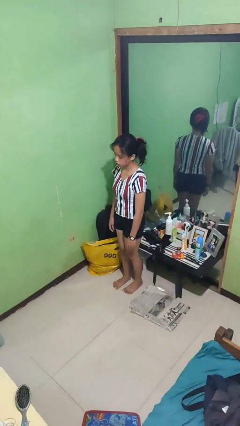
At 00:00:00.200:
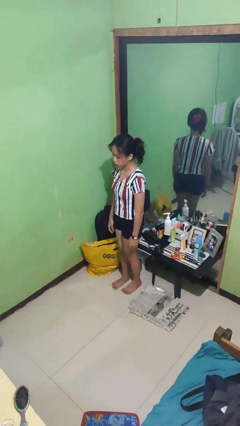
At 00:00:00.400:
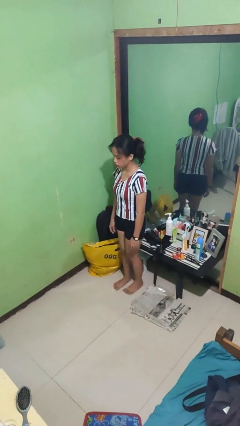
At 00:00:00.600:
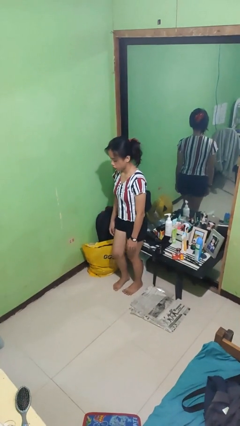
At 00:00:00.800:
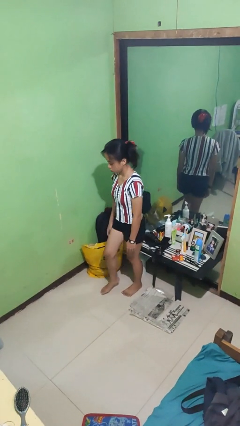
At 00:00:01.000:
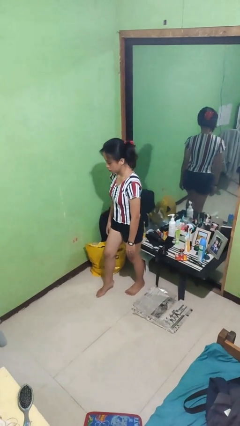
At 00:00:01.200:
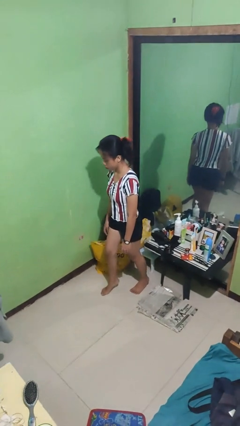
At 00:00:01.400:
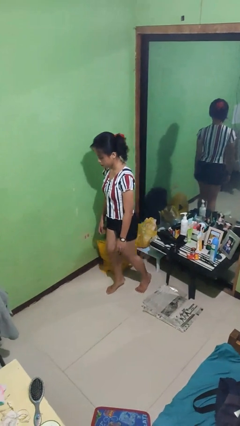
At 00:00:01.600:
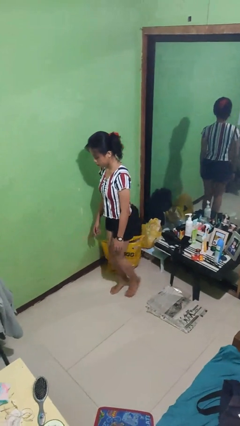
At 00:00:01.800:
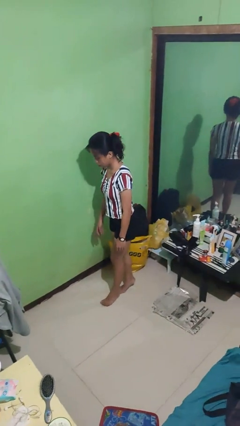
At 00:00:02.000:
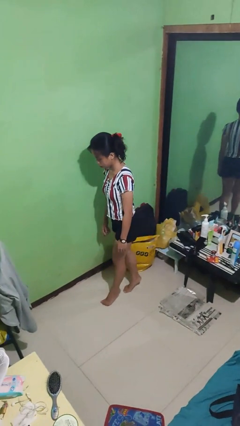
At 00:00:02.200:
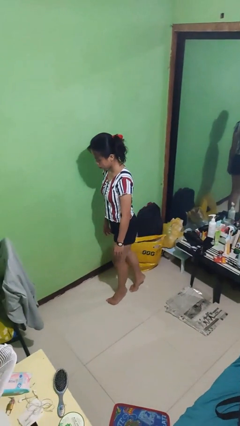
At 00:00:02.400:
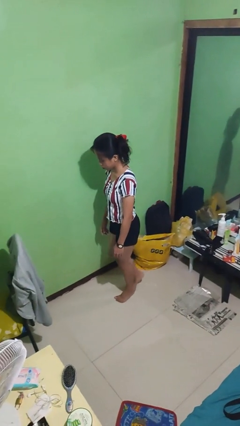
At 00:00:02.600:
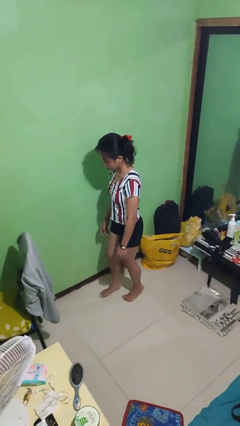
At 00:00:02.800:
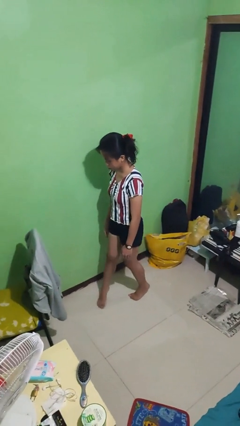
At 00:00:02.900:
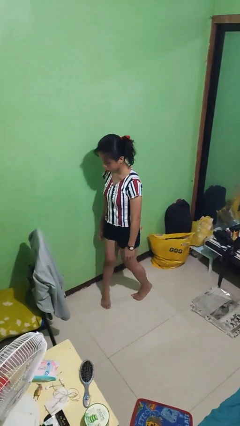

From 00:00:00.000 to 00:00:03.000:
person walks tiptoe

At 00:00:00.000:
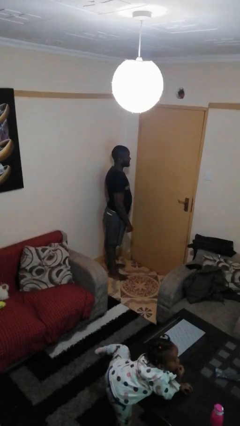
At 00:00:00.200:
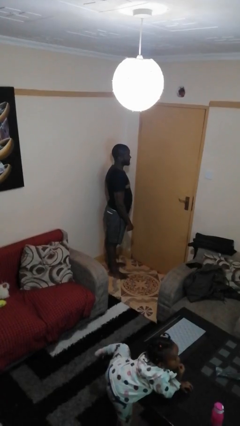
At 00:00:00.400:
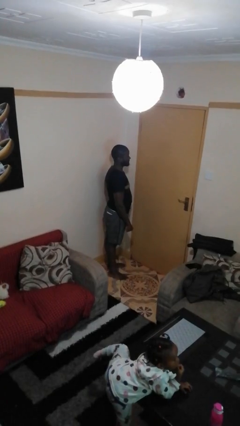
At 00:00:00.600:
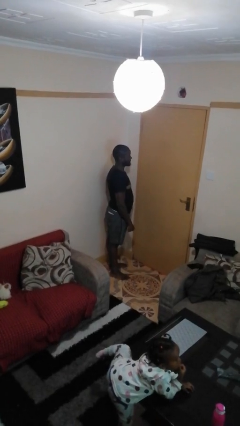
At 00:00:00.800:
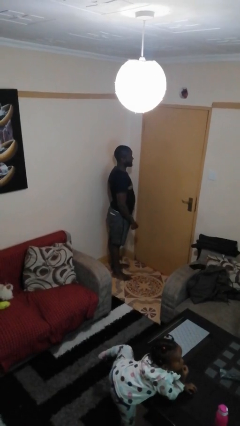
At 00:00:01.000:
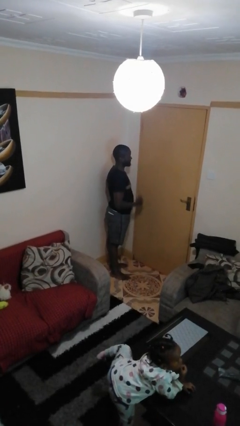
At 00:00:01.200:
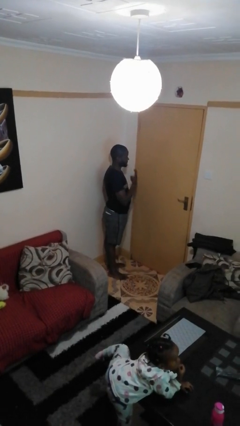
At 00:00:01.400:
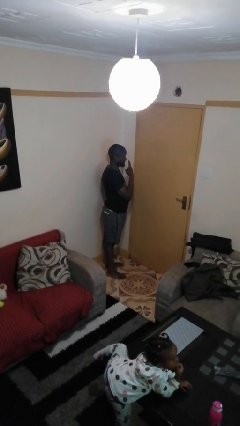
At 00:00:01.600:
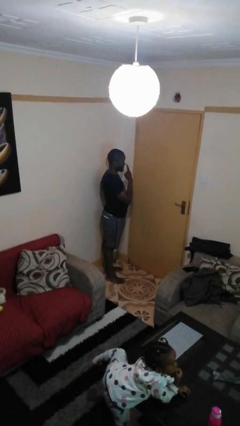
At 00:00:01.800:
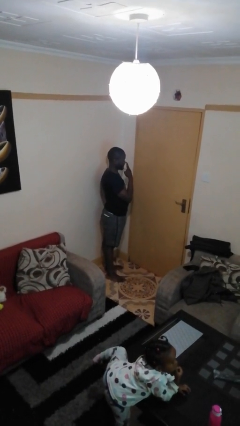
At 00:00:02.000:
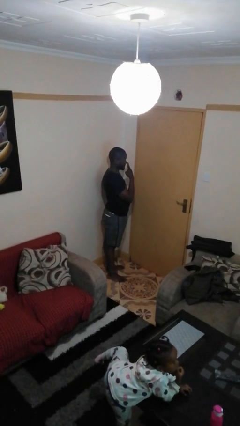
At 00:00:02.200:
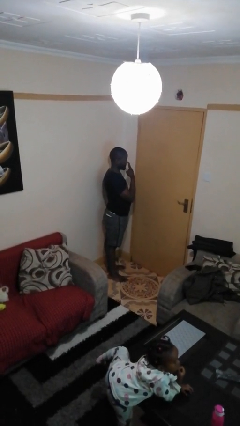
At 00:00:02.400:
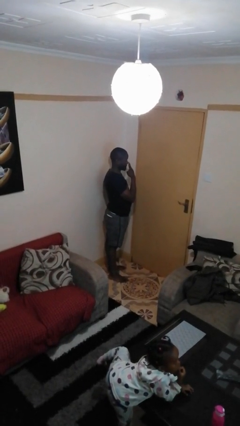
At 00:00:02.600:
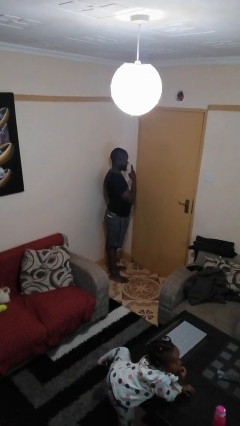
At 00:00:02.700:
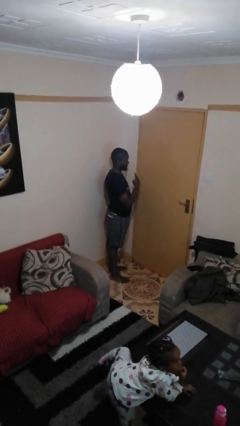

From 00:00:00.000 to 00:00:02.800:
person gestures watch closely

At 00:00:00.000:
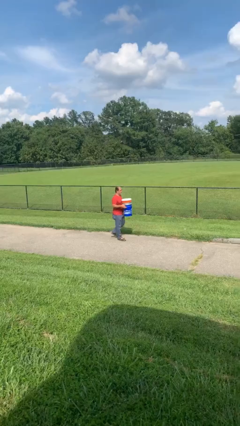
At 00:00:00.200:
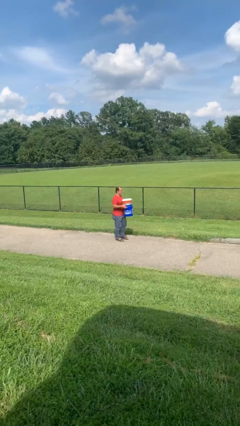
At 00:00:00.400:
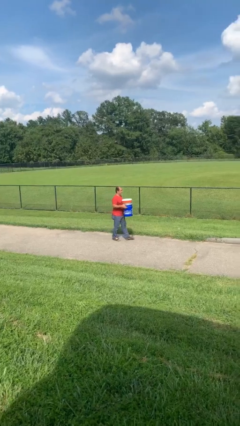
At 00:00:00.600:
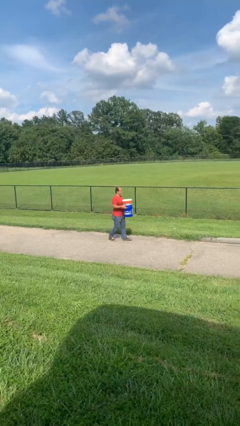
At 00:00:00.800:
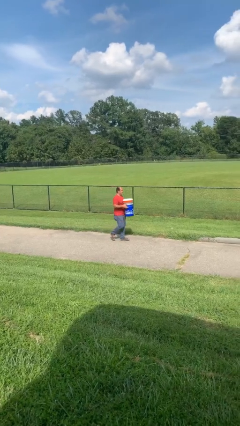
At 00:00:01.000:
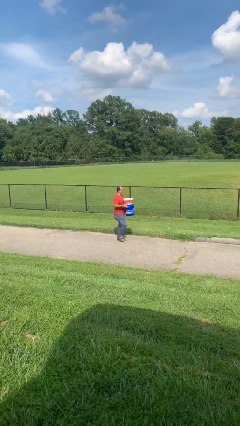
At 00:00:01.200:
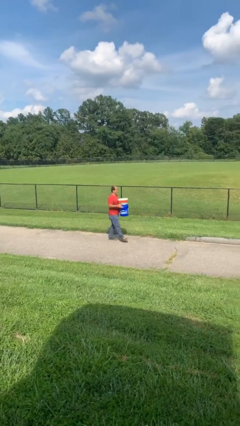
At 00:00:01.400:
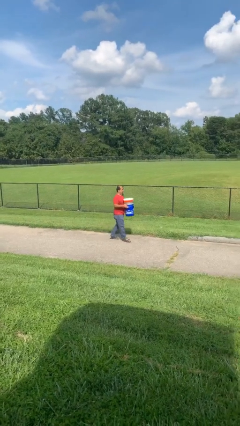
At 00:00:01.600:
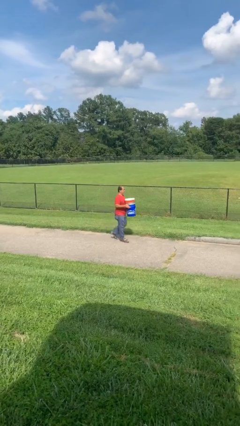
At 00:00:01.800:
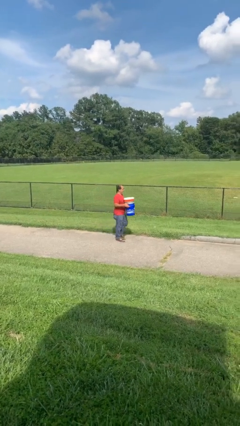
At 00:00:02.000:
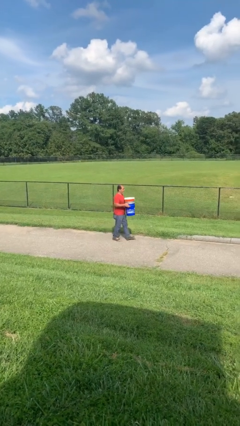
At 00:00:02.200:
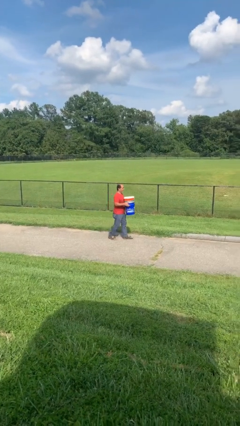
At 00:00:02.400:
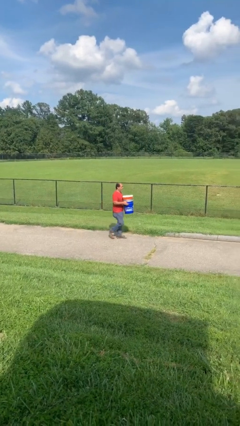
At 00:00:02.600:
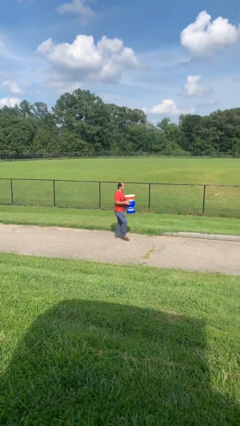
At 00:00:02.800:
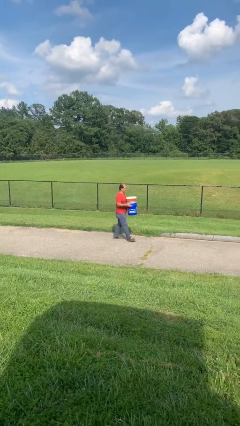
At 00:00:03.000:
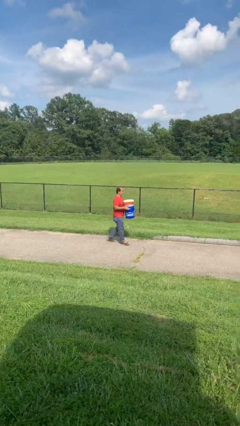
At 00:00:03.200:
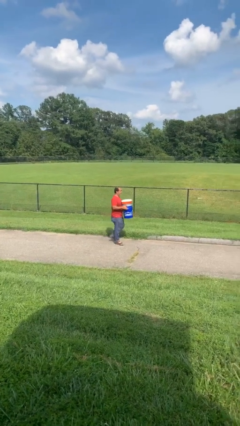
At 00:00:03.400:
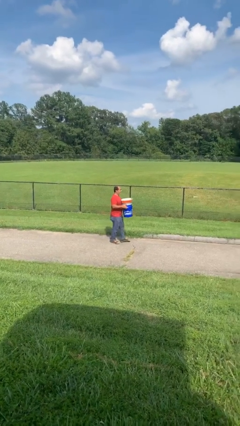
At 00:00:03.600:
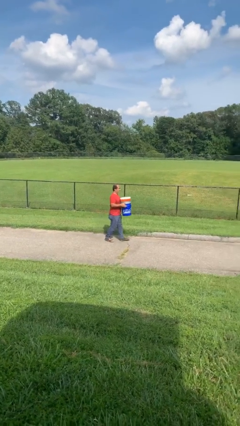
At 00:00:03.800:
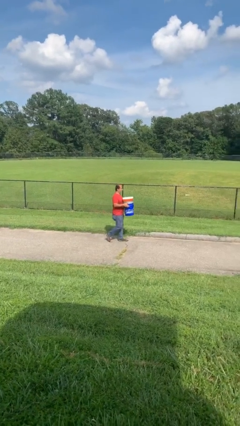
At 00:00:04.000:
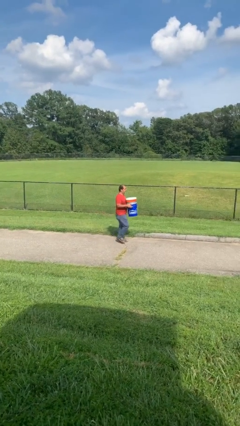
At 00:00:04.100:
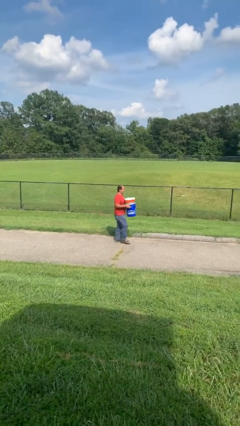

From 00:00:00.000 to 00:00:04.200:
person carries heavy object

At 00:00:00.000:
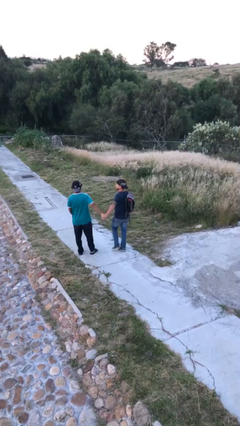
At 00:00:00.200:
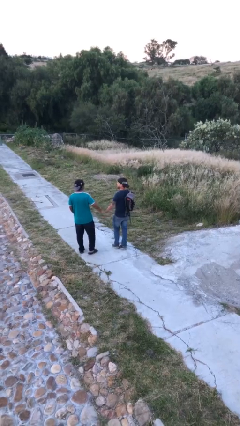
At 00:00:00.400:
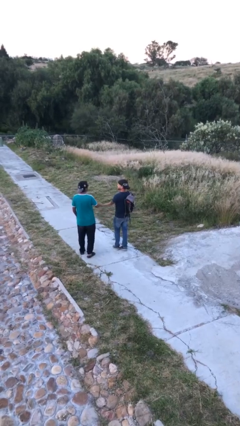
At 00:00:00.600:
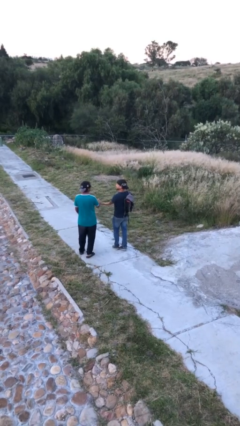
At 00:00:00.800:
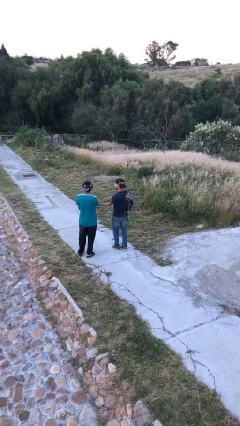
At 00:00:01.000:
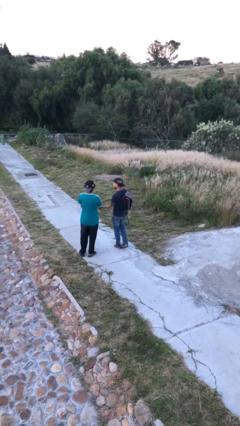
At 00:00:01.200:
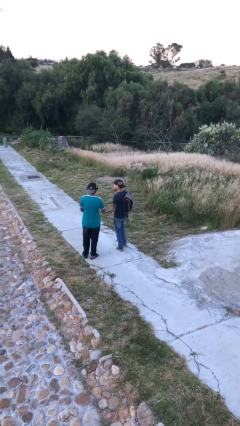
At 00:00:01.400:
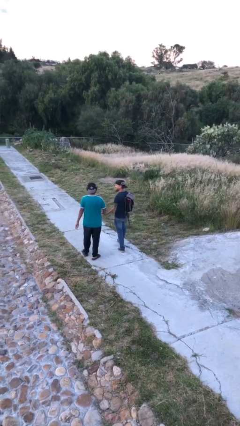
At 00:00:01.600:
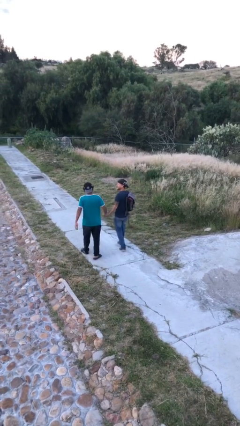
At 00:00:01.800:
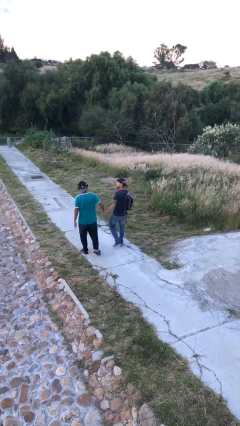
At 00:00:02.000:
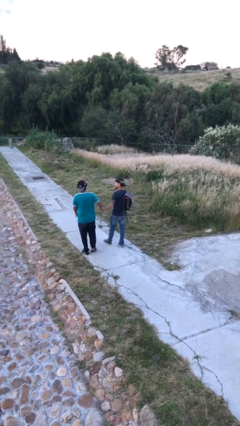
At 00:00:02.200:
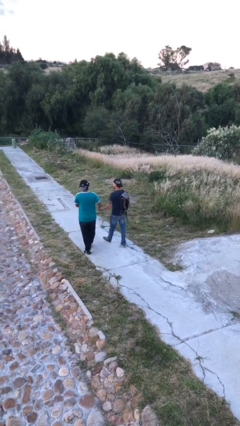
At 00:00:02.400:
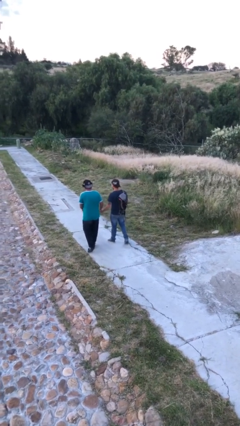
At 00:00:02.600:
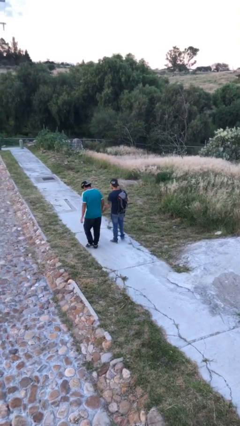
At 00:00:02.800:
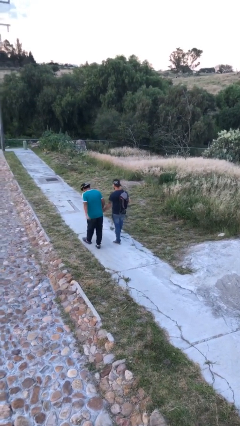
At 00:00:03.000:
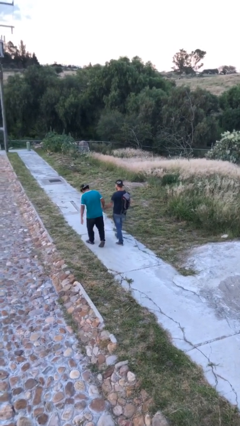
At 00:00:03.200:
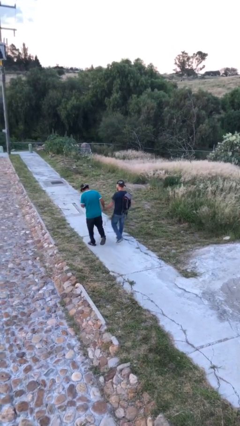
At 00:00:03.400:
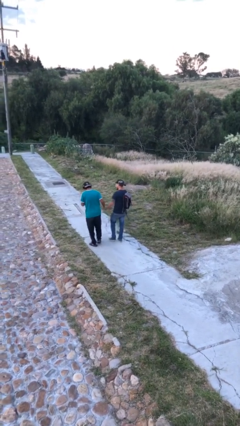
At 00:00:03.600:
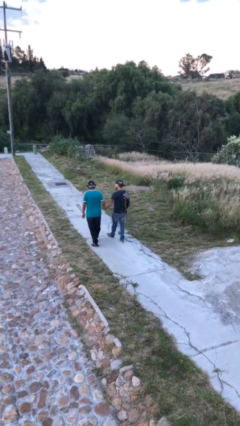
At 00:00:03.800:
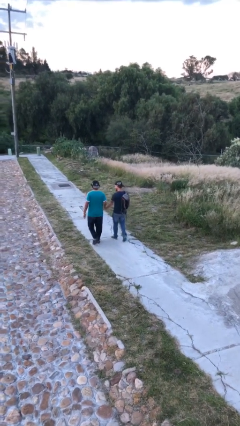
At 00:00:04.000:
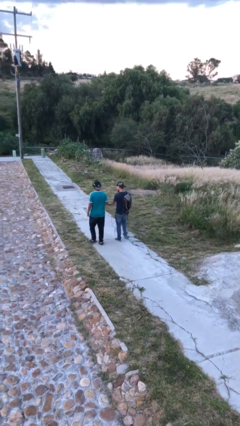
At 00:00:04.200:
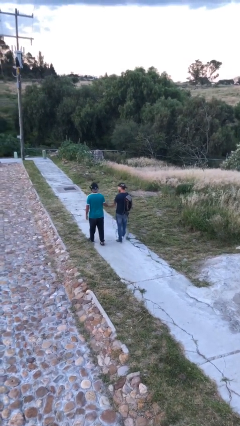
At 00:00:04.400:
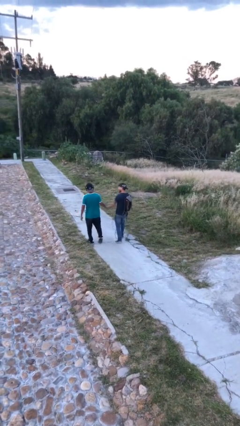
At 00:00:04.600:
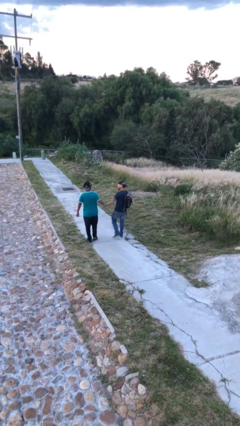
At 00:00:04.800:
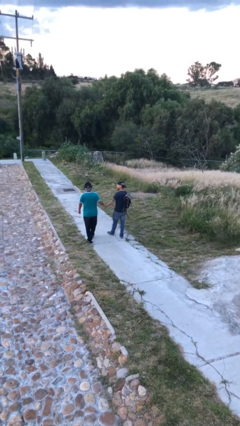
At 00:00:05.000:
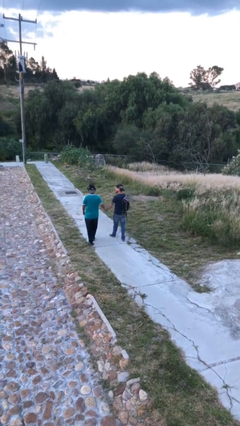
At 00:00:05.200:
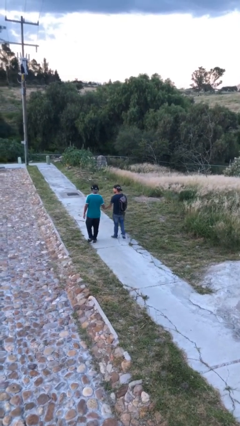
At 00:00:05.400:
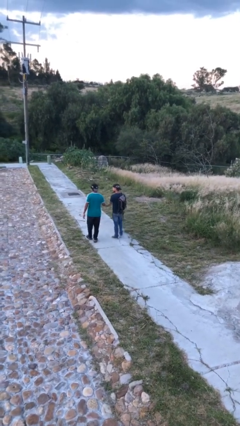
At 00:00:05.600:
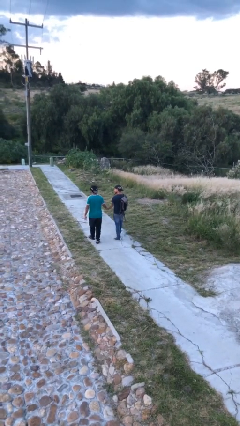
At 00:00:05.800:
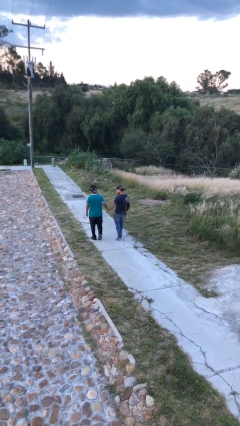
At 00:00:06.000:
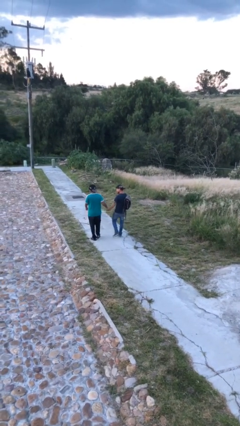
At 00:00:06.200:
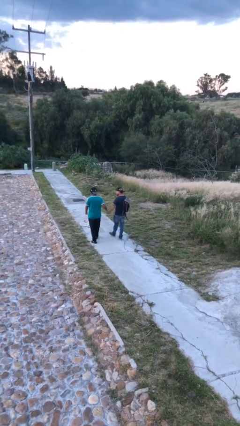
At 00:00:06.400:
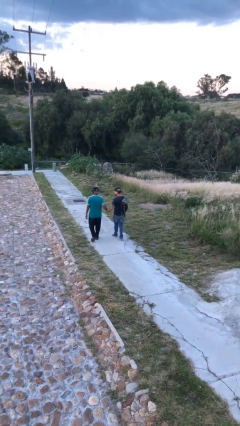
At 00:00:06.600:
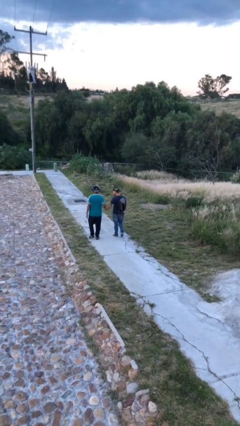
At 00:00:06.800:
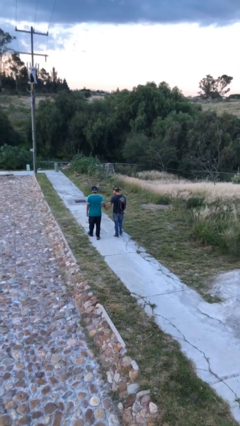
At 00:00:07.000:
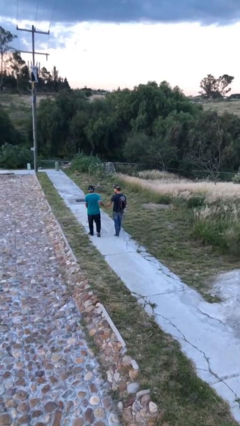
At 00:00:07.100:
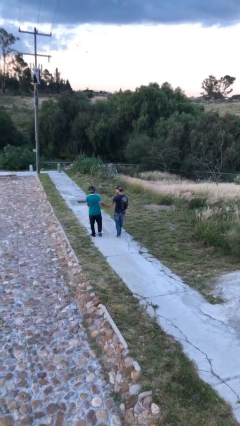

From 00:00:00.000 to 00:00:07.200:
person holds hand

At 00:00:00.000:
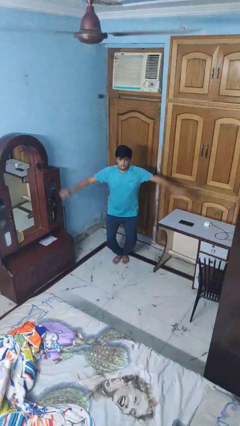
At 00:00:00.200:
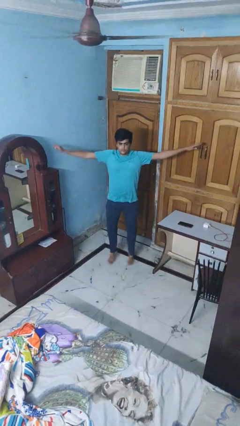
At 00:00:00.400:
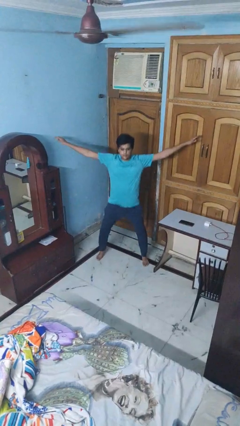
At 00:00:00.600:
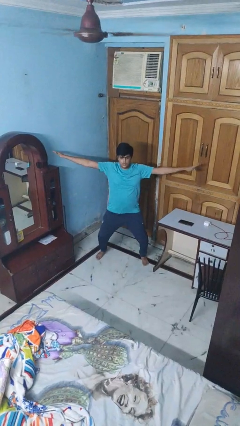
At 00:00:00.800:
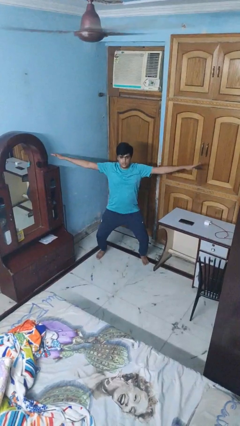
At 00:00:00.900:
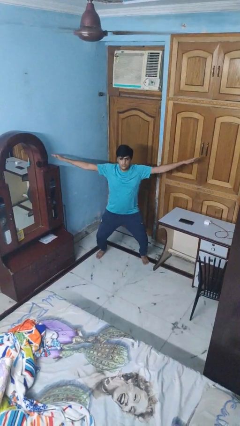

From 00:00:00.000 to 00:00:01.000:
person exercises with jumping jacks
